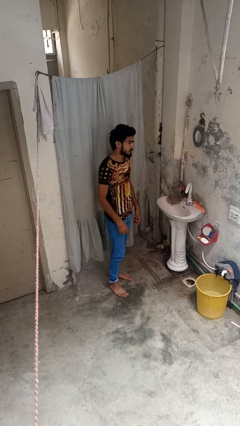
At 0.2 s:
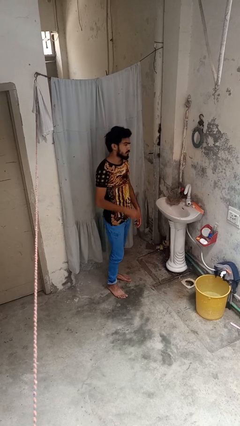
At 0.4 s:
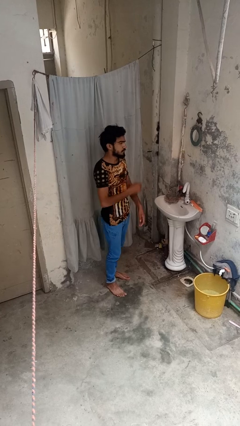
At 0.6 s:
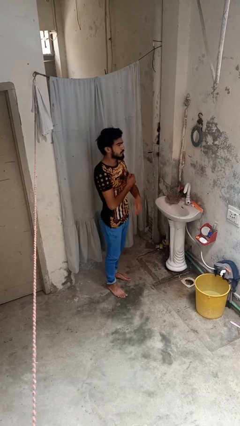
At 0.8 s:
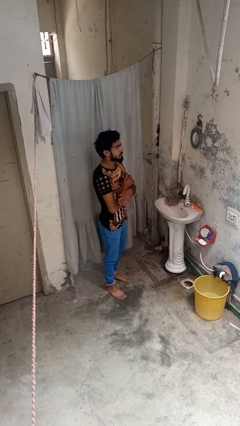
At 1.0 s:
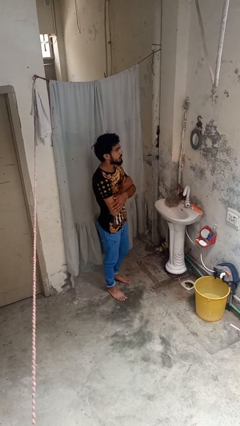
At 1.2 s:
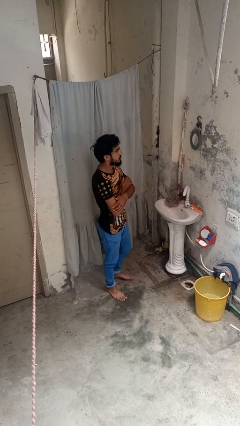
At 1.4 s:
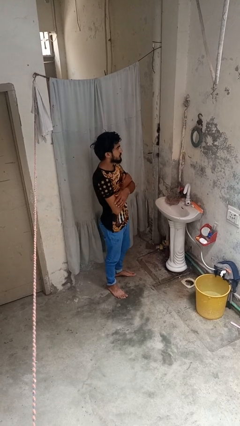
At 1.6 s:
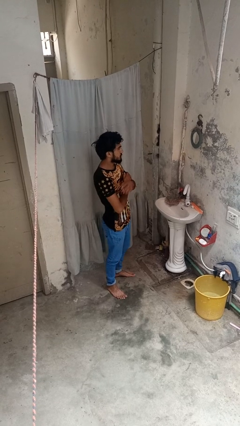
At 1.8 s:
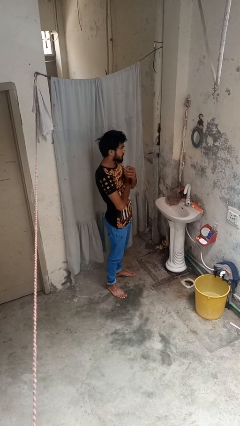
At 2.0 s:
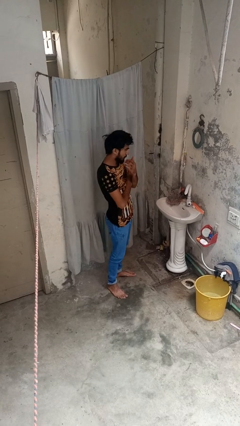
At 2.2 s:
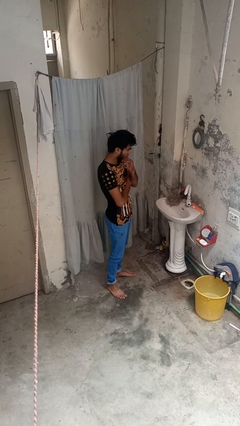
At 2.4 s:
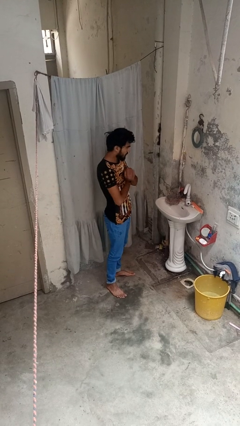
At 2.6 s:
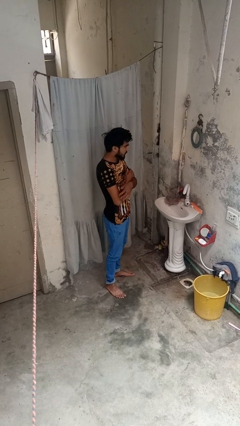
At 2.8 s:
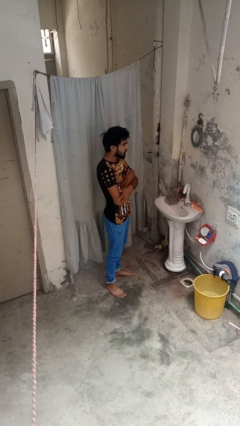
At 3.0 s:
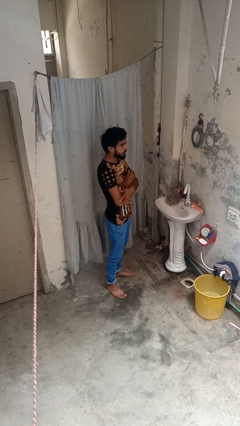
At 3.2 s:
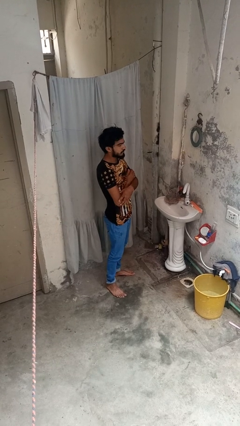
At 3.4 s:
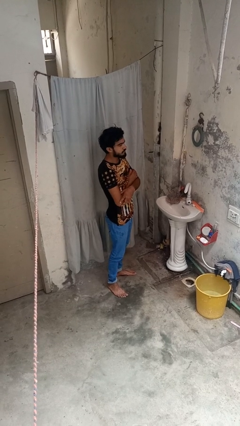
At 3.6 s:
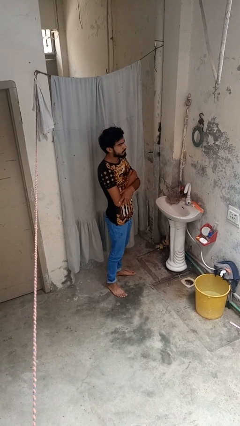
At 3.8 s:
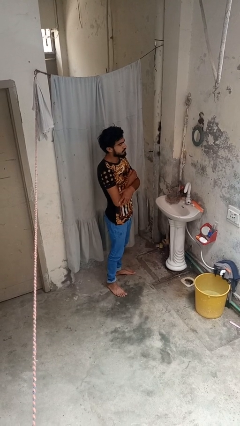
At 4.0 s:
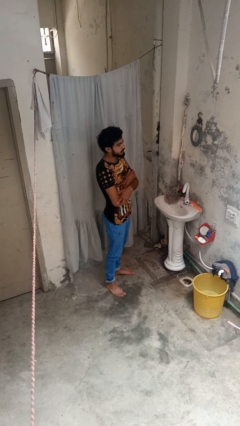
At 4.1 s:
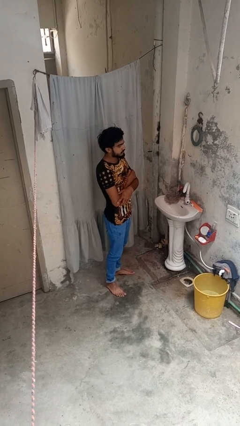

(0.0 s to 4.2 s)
person crosses arms

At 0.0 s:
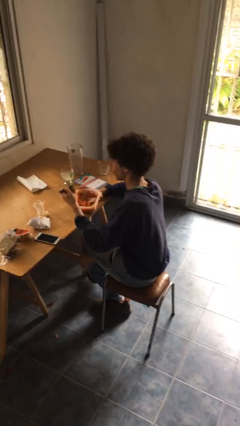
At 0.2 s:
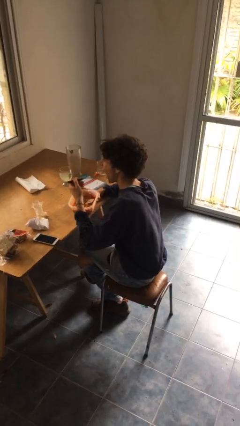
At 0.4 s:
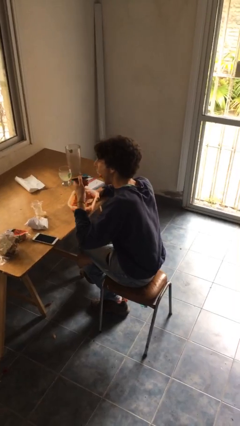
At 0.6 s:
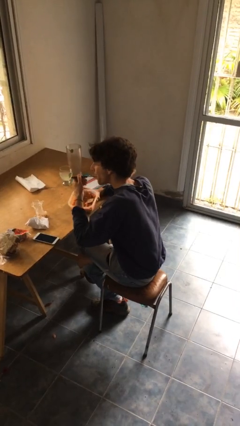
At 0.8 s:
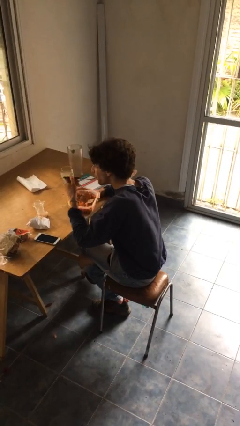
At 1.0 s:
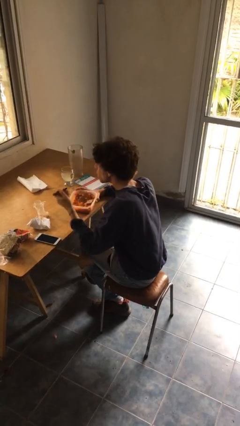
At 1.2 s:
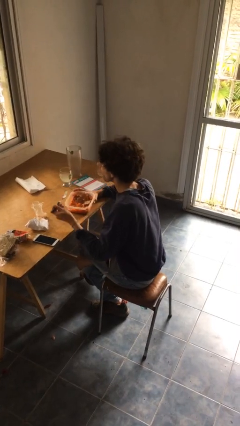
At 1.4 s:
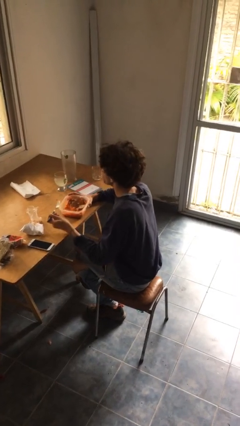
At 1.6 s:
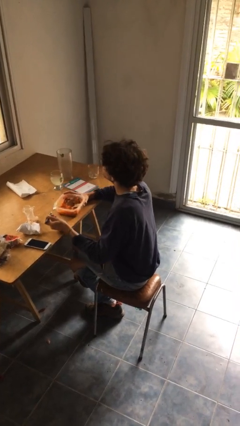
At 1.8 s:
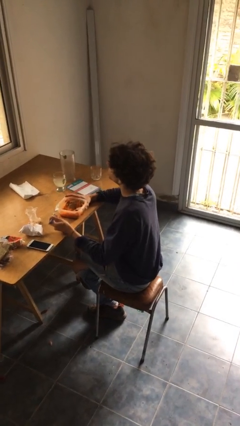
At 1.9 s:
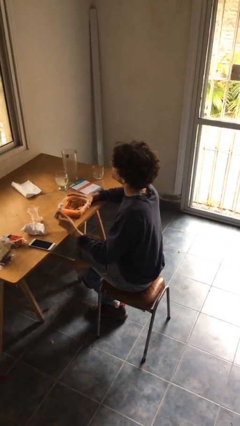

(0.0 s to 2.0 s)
person eats with utensil

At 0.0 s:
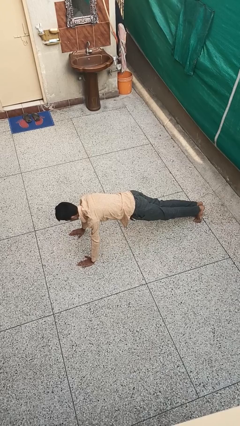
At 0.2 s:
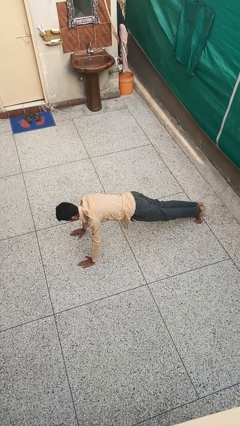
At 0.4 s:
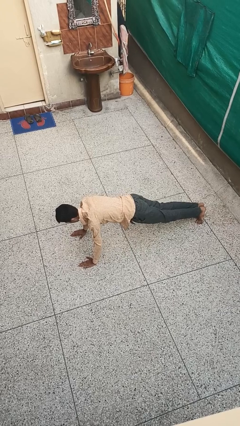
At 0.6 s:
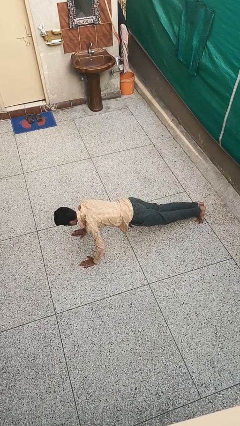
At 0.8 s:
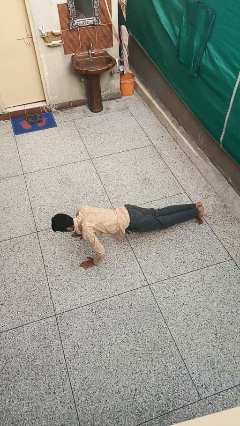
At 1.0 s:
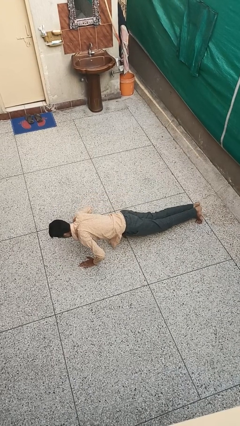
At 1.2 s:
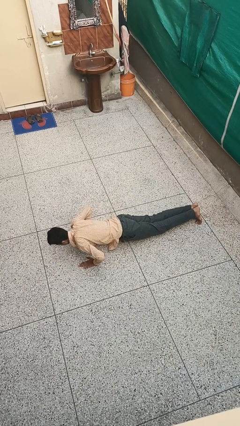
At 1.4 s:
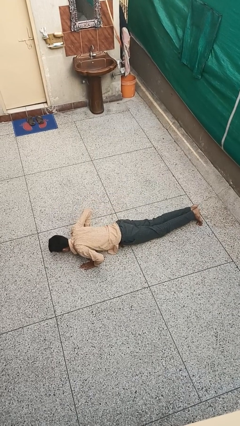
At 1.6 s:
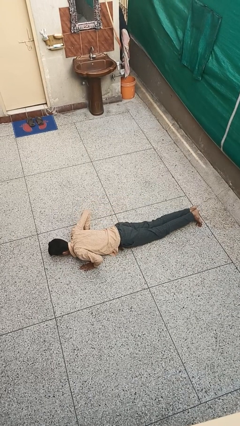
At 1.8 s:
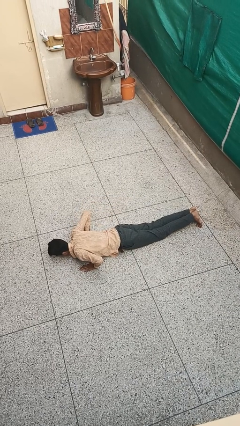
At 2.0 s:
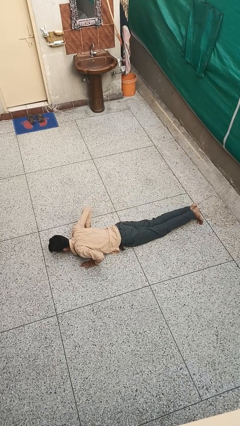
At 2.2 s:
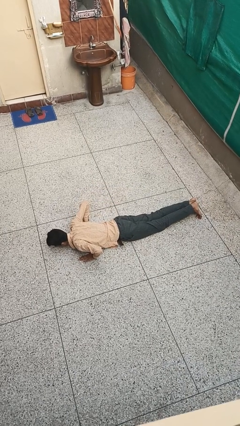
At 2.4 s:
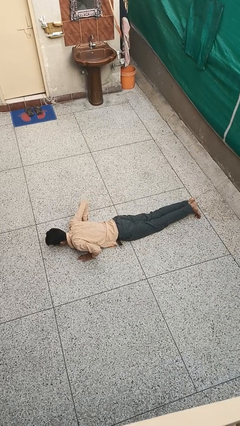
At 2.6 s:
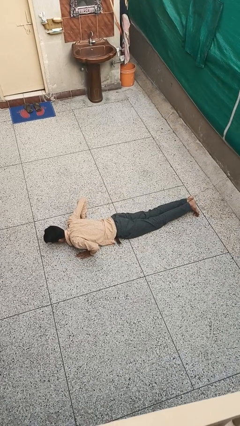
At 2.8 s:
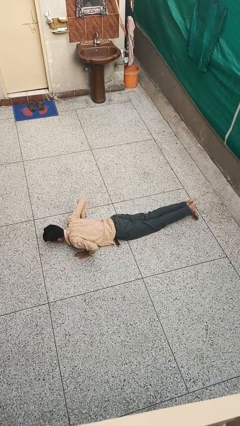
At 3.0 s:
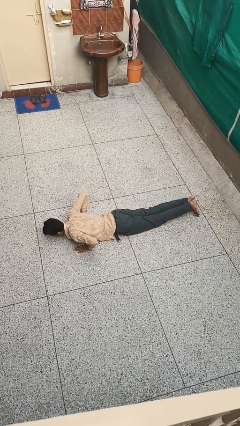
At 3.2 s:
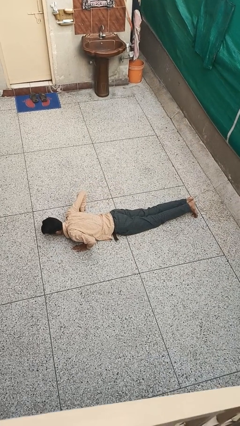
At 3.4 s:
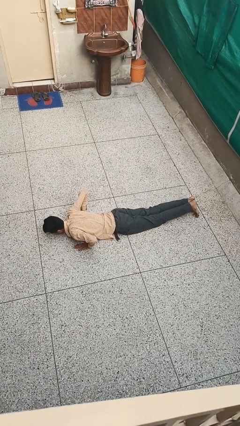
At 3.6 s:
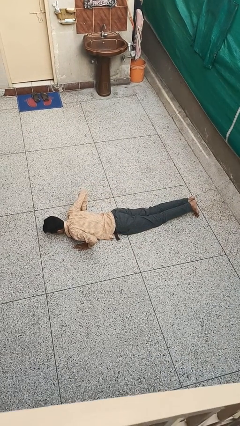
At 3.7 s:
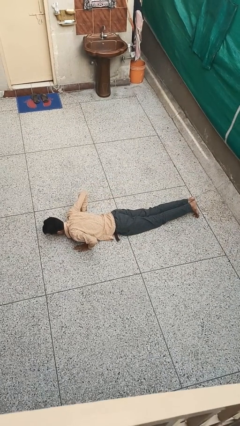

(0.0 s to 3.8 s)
person exercises with pushup

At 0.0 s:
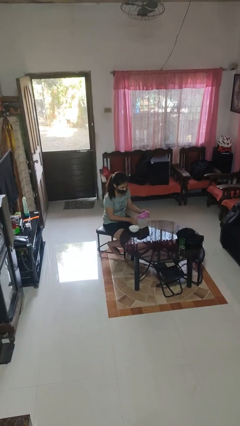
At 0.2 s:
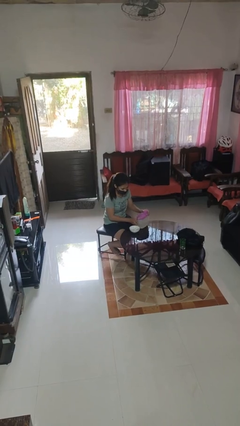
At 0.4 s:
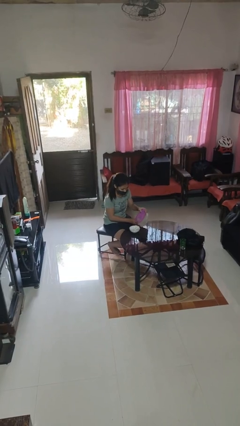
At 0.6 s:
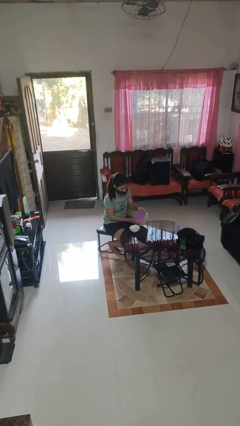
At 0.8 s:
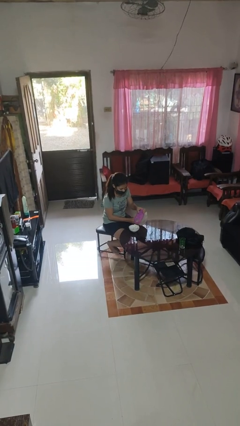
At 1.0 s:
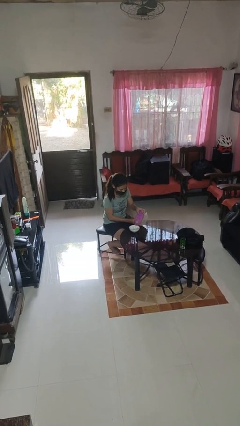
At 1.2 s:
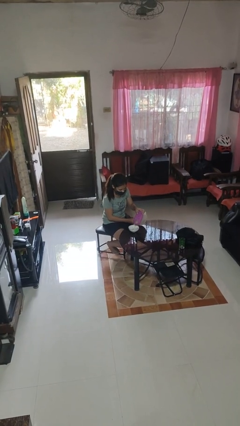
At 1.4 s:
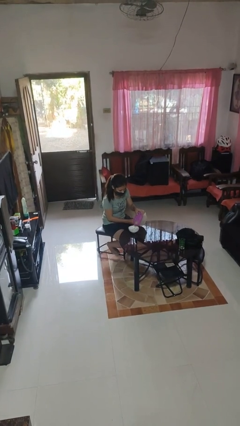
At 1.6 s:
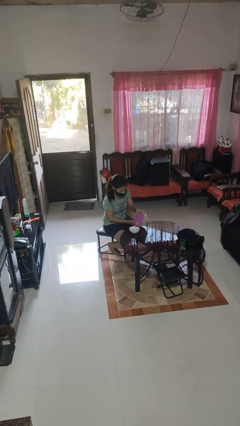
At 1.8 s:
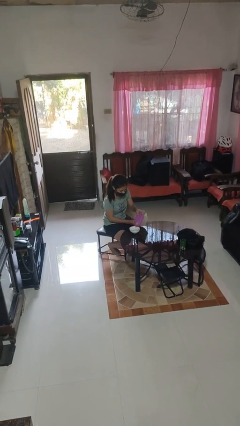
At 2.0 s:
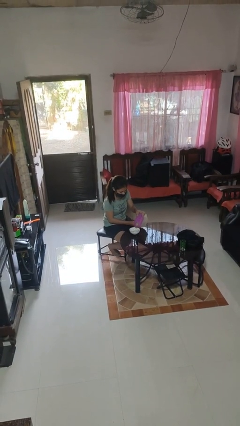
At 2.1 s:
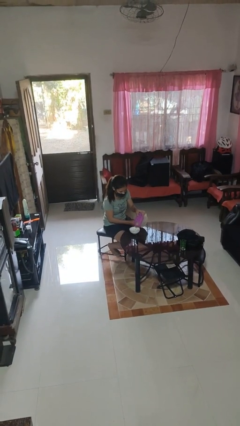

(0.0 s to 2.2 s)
person pours into bowl

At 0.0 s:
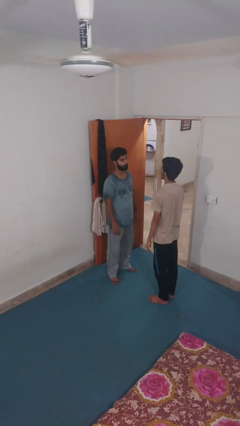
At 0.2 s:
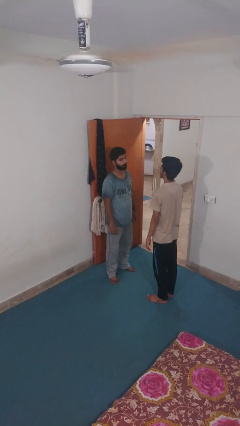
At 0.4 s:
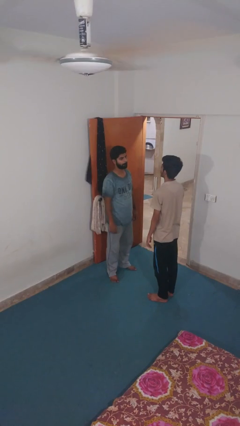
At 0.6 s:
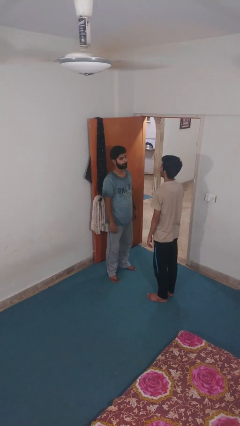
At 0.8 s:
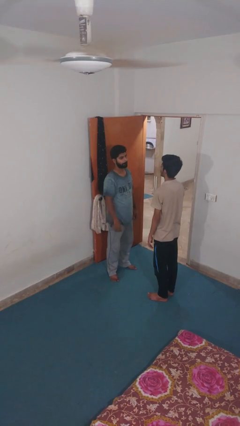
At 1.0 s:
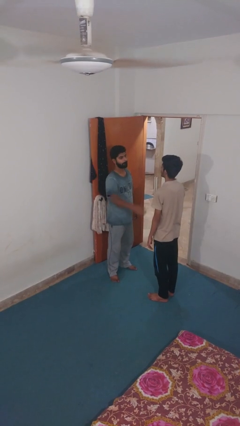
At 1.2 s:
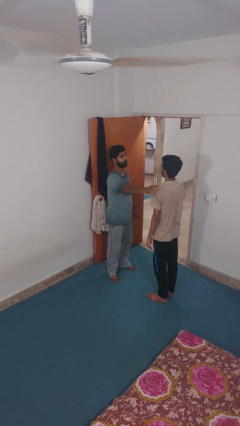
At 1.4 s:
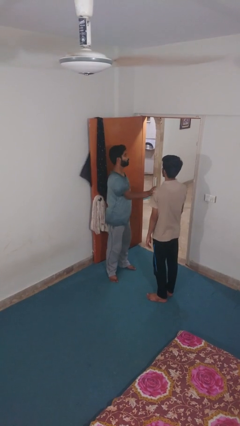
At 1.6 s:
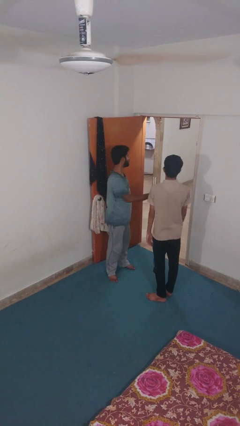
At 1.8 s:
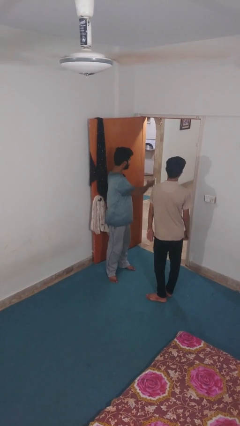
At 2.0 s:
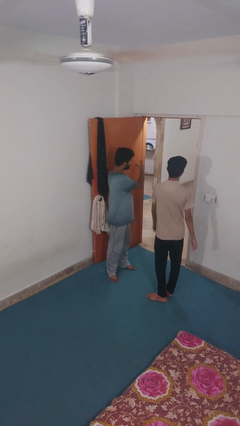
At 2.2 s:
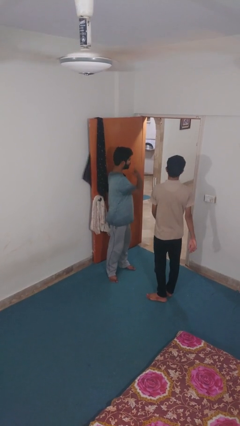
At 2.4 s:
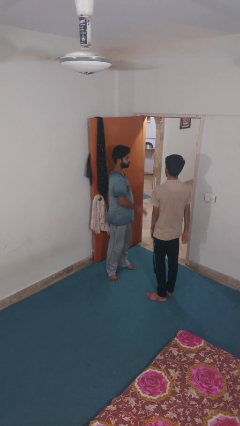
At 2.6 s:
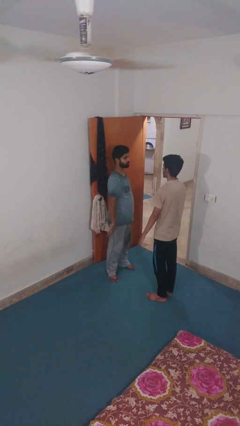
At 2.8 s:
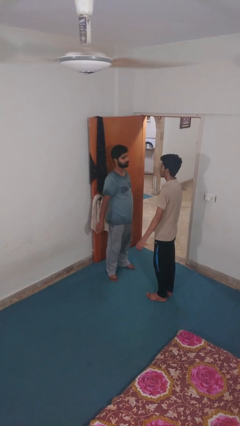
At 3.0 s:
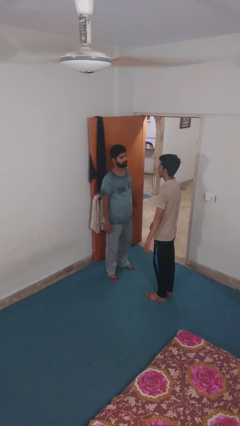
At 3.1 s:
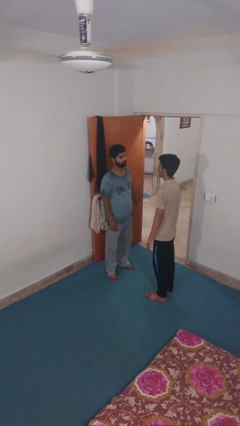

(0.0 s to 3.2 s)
person shoves person

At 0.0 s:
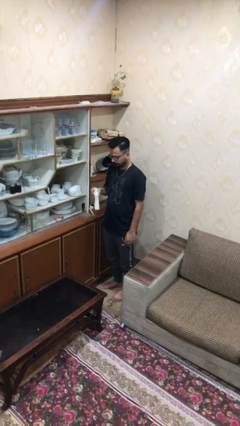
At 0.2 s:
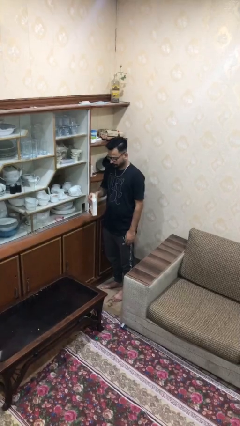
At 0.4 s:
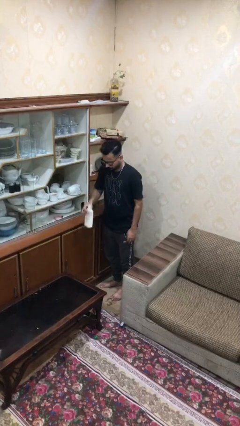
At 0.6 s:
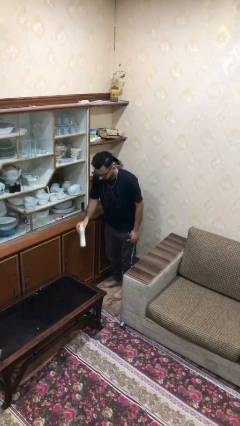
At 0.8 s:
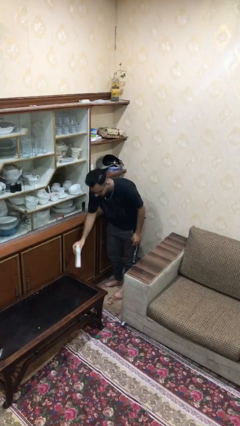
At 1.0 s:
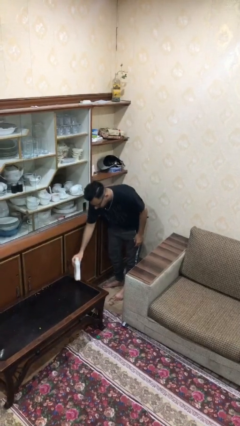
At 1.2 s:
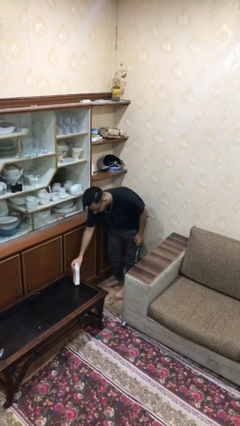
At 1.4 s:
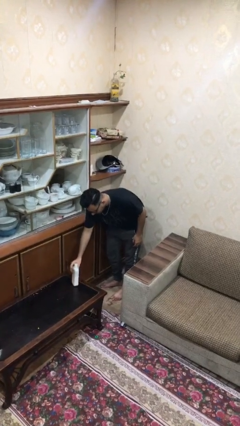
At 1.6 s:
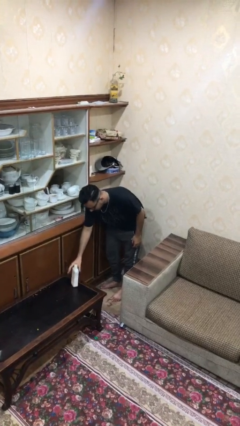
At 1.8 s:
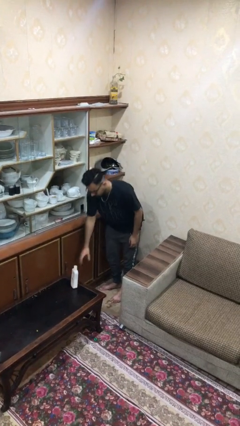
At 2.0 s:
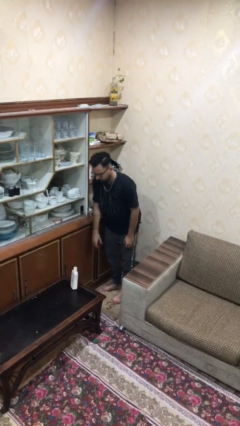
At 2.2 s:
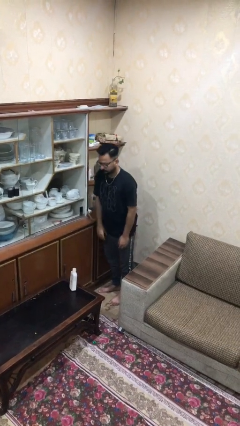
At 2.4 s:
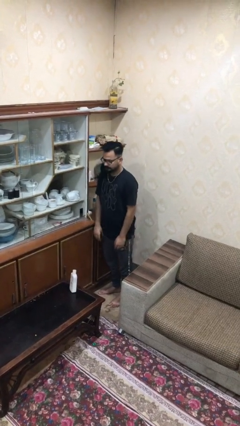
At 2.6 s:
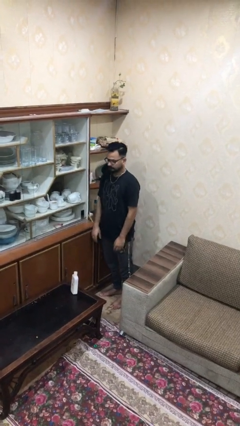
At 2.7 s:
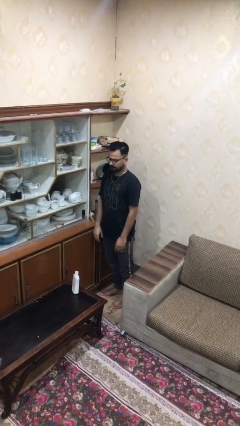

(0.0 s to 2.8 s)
person puts down object on table
